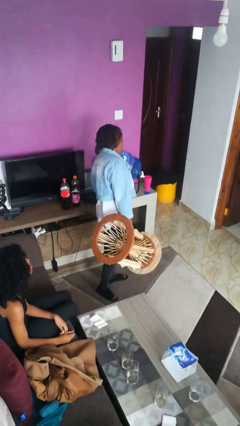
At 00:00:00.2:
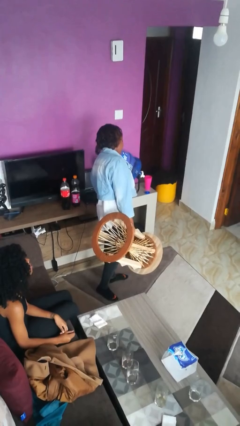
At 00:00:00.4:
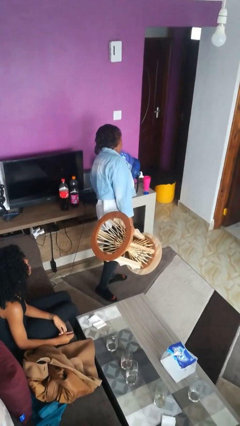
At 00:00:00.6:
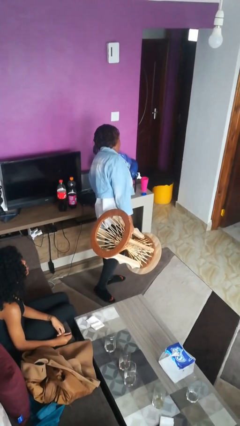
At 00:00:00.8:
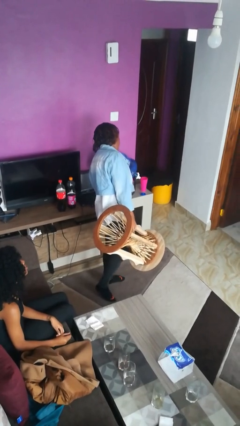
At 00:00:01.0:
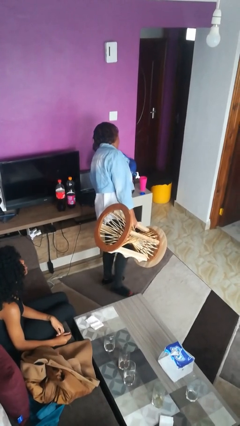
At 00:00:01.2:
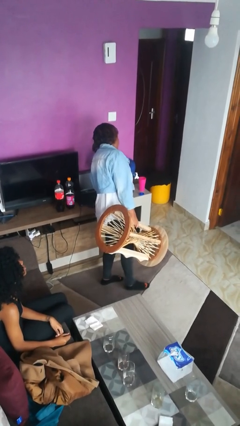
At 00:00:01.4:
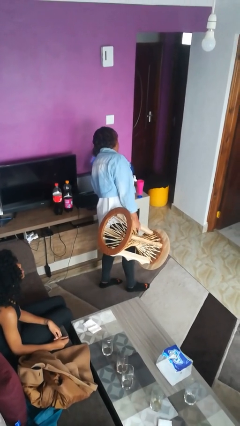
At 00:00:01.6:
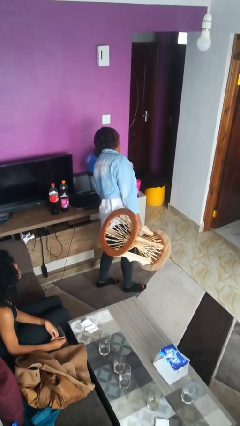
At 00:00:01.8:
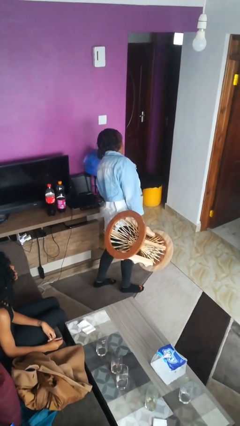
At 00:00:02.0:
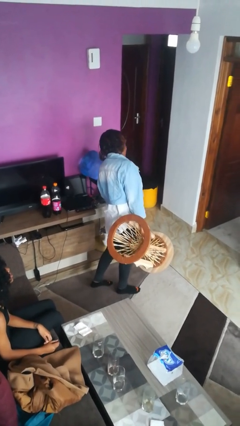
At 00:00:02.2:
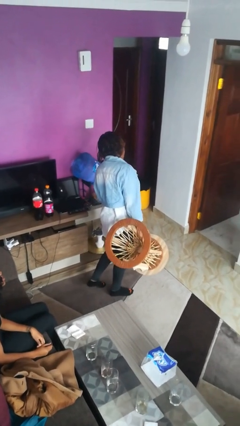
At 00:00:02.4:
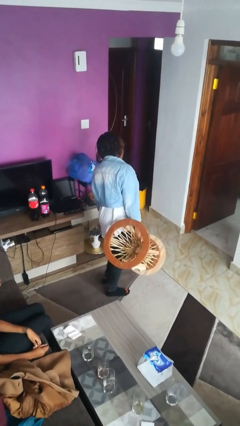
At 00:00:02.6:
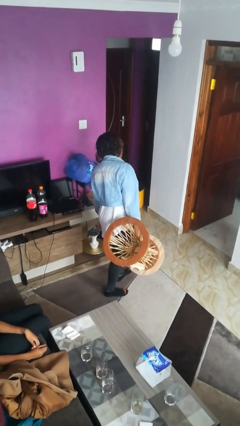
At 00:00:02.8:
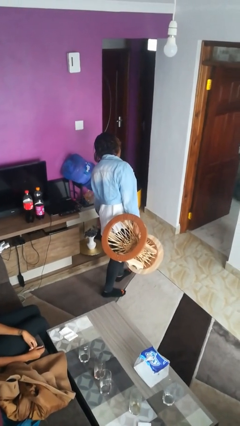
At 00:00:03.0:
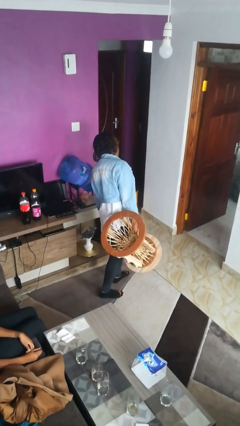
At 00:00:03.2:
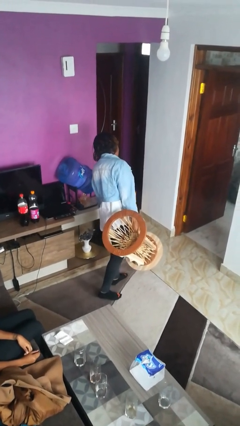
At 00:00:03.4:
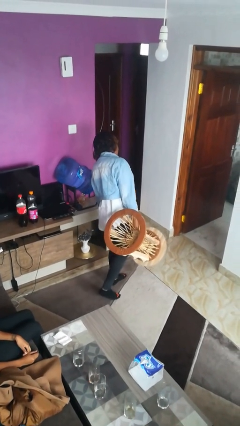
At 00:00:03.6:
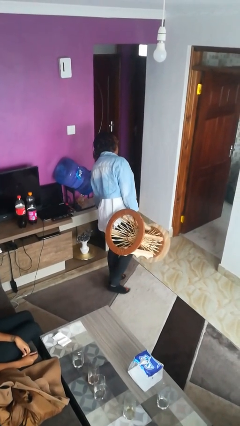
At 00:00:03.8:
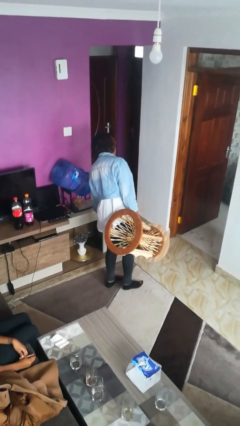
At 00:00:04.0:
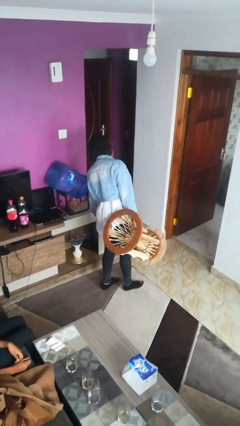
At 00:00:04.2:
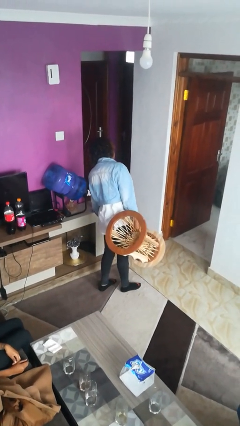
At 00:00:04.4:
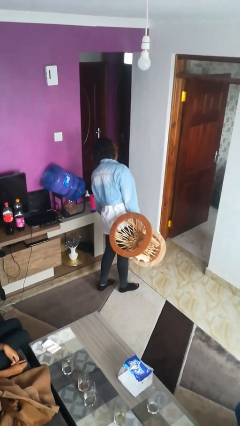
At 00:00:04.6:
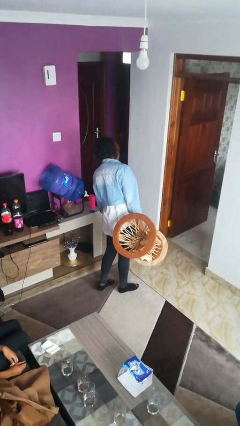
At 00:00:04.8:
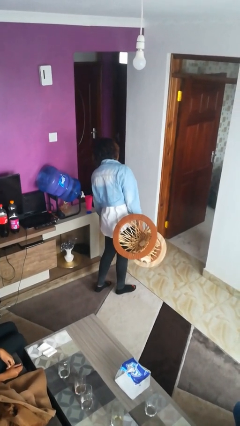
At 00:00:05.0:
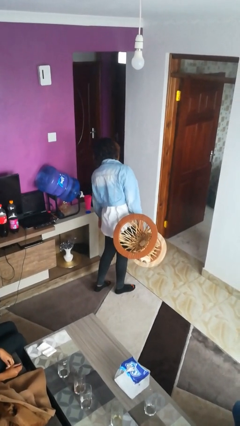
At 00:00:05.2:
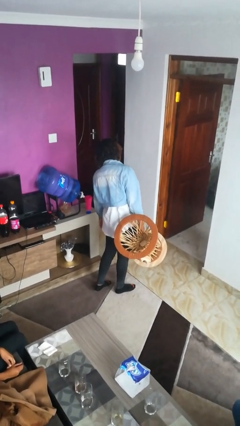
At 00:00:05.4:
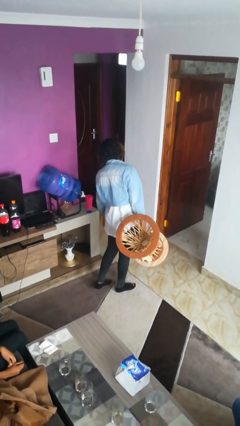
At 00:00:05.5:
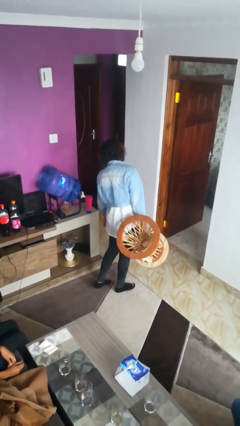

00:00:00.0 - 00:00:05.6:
person carries furniture

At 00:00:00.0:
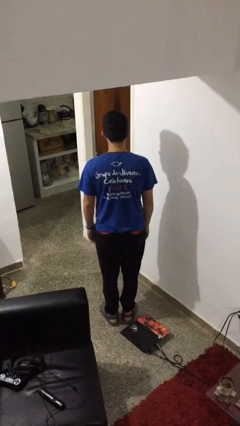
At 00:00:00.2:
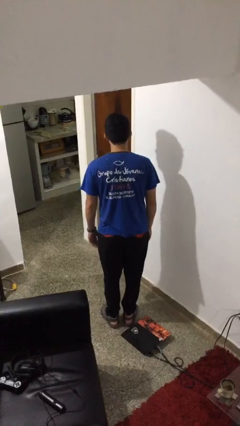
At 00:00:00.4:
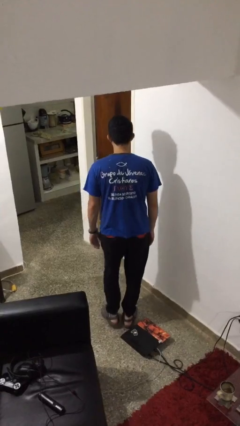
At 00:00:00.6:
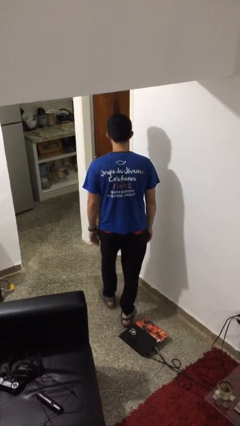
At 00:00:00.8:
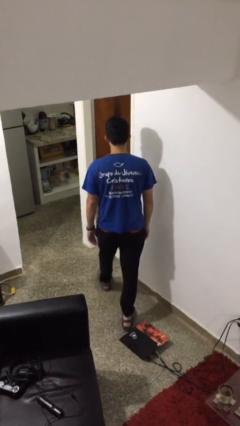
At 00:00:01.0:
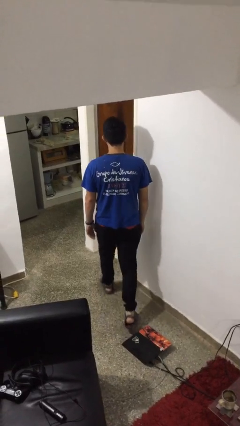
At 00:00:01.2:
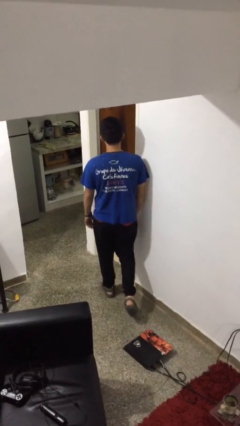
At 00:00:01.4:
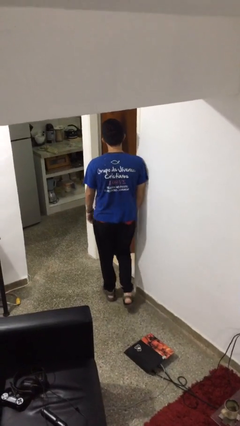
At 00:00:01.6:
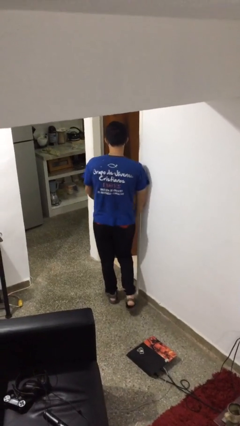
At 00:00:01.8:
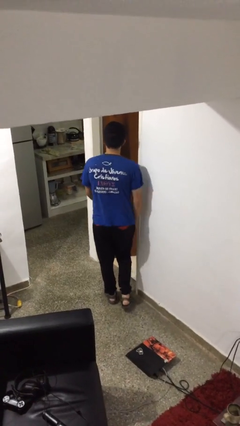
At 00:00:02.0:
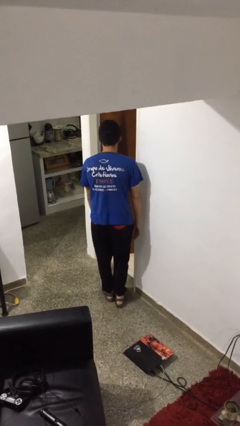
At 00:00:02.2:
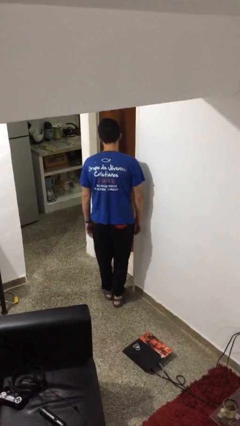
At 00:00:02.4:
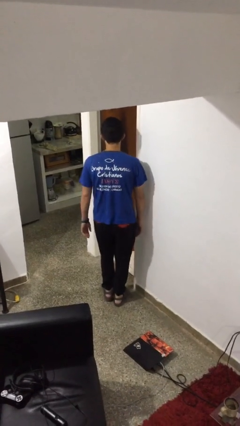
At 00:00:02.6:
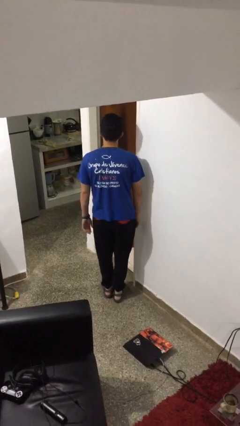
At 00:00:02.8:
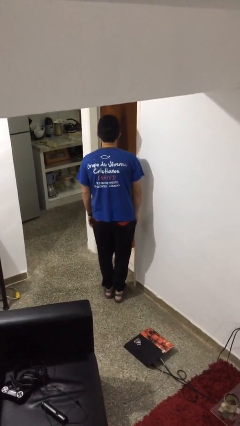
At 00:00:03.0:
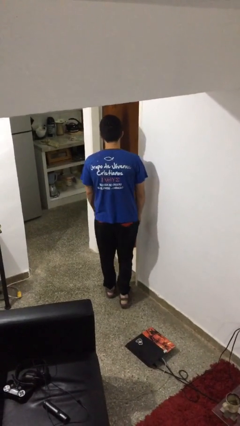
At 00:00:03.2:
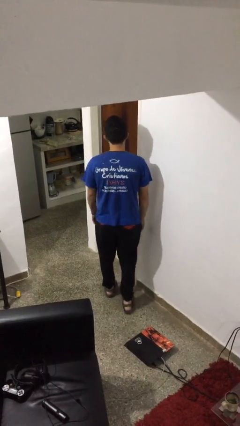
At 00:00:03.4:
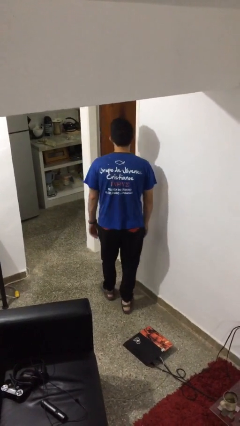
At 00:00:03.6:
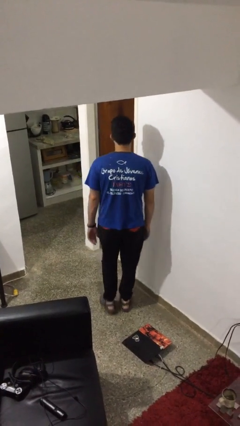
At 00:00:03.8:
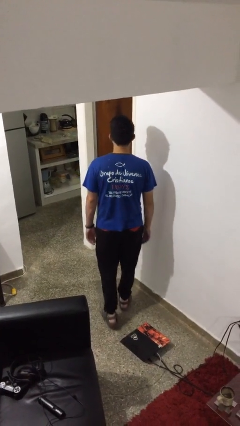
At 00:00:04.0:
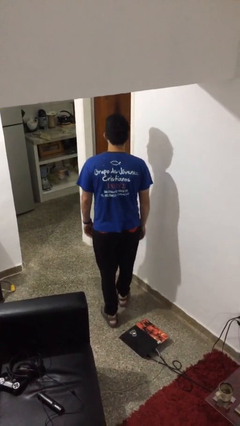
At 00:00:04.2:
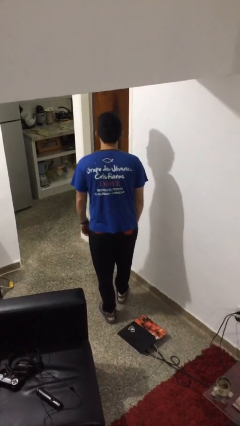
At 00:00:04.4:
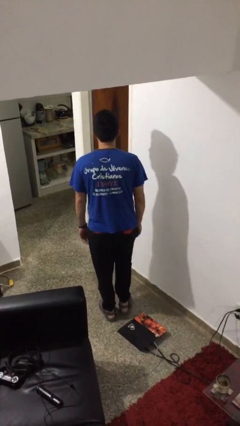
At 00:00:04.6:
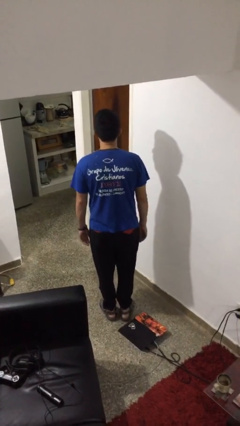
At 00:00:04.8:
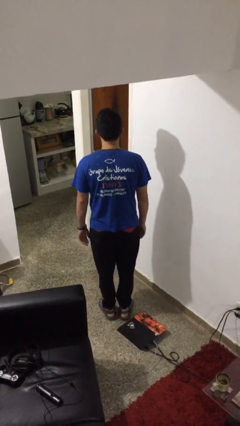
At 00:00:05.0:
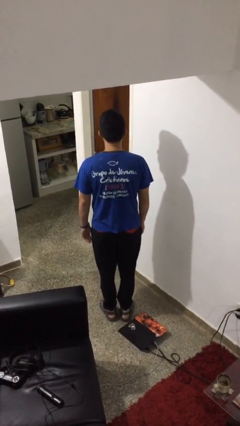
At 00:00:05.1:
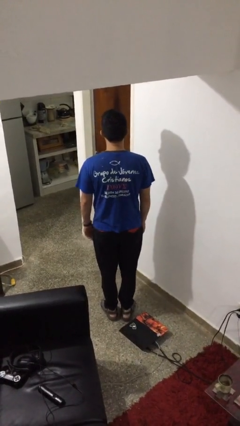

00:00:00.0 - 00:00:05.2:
person bumps into wall

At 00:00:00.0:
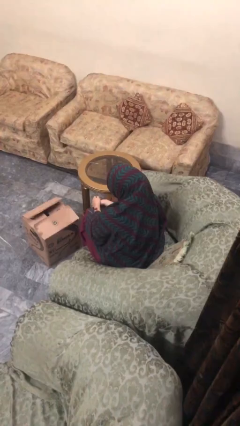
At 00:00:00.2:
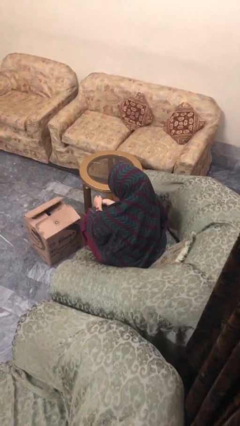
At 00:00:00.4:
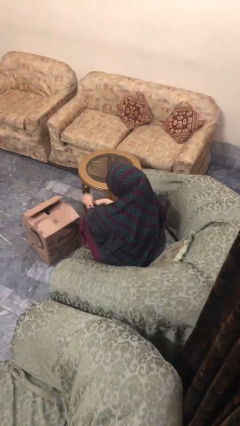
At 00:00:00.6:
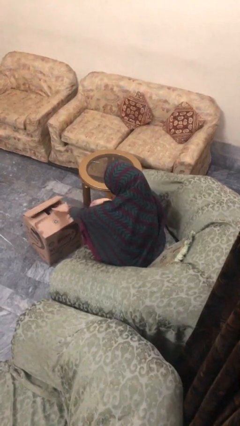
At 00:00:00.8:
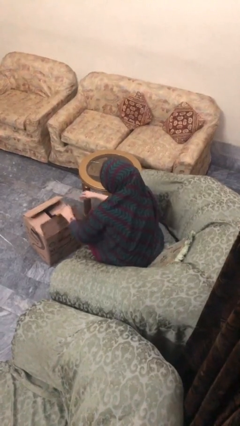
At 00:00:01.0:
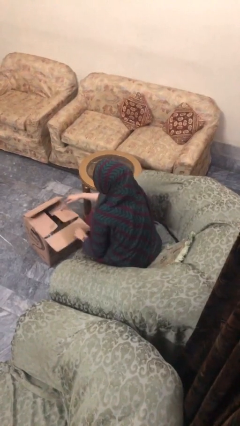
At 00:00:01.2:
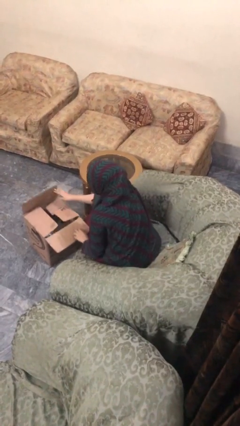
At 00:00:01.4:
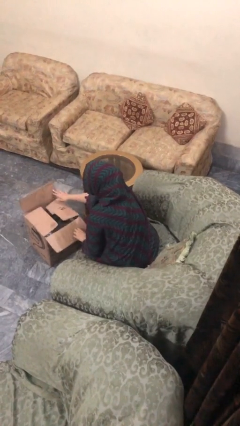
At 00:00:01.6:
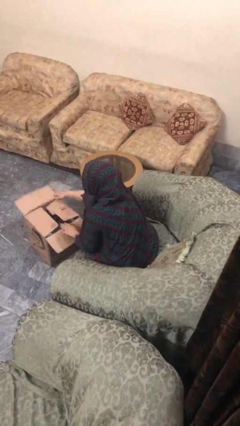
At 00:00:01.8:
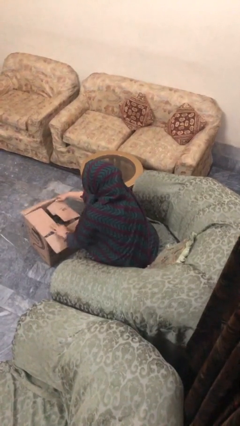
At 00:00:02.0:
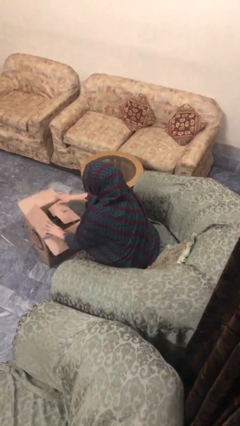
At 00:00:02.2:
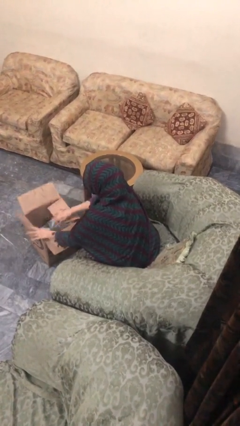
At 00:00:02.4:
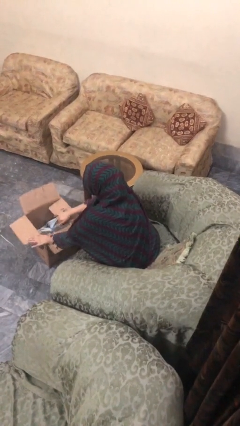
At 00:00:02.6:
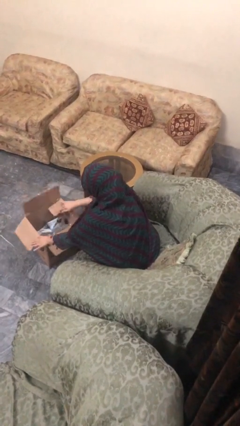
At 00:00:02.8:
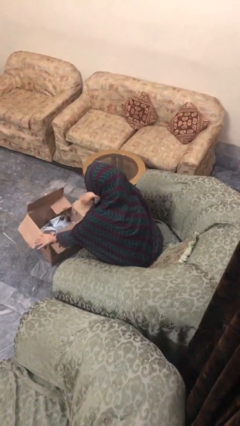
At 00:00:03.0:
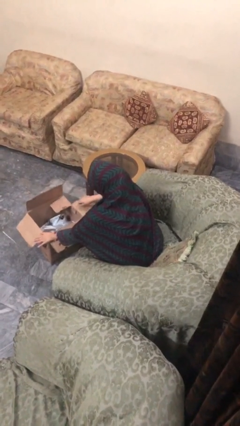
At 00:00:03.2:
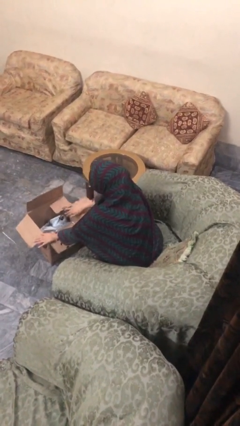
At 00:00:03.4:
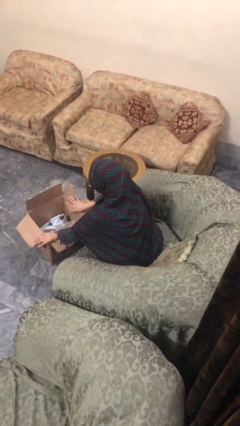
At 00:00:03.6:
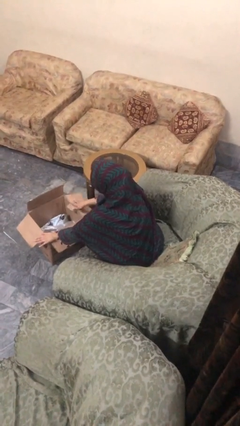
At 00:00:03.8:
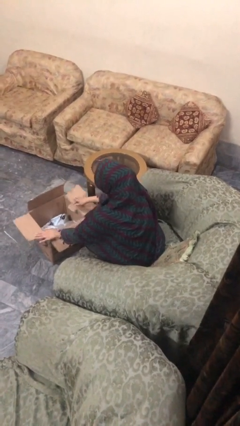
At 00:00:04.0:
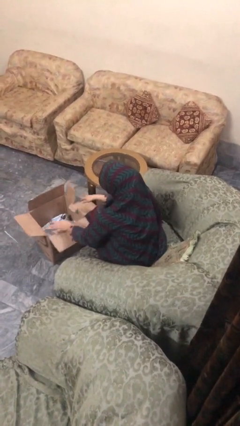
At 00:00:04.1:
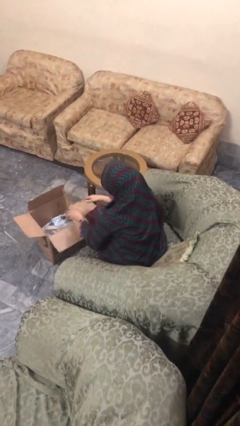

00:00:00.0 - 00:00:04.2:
person opens box

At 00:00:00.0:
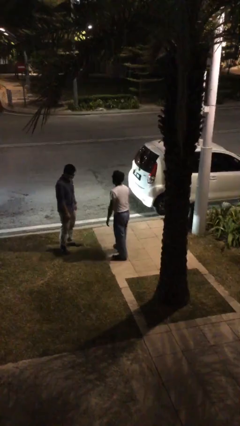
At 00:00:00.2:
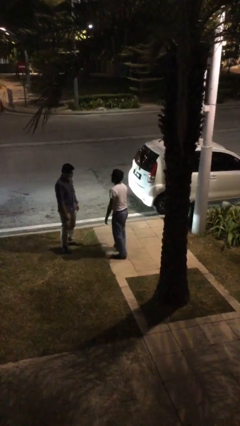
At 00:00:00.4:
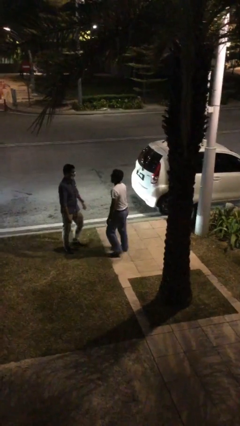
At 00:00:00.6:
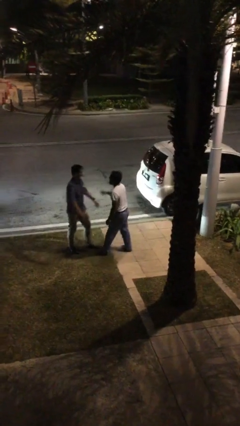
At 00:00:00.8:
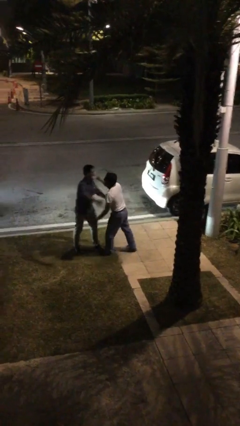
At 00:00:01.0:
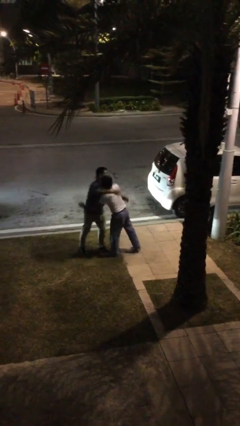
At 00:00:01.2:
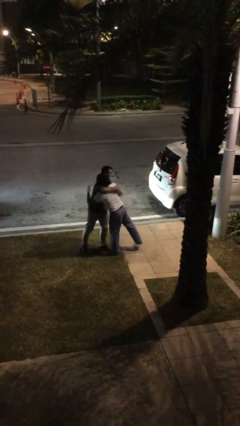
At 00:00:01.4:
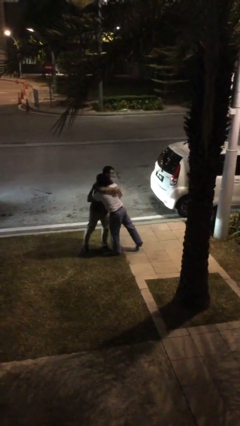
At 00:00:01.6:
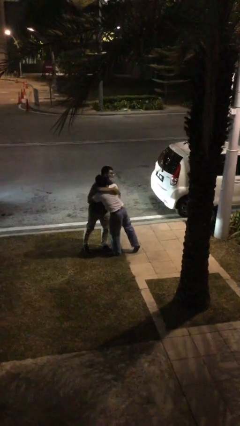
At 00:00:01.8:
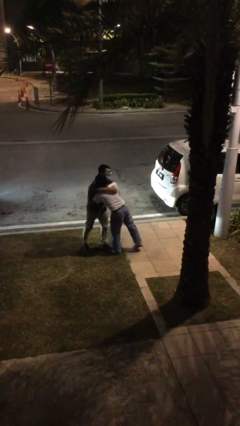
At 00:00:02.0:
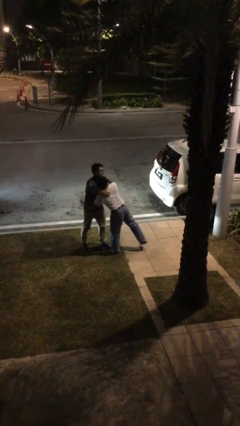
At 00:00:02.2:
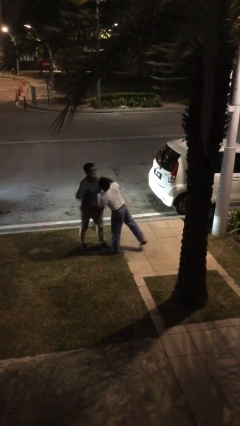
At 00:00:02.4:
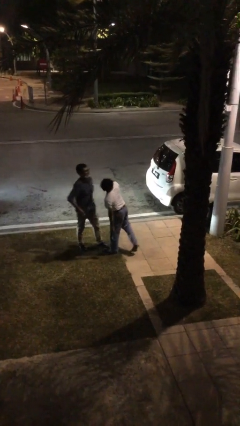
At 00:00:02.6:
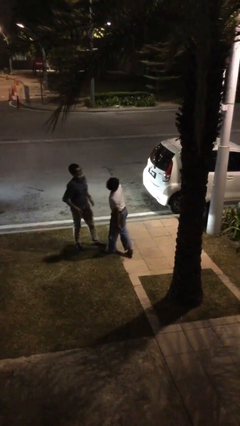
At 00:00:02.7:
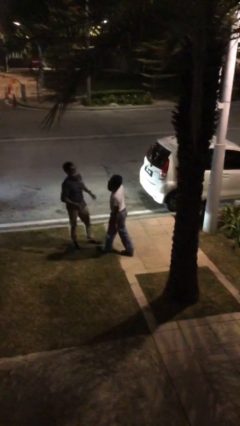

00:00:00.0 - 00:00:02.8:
person embraces person
